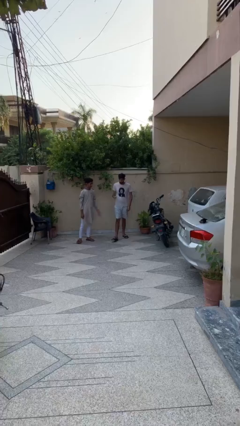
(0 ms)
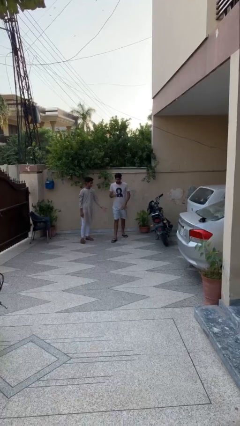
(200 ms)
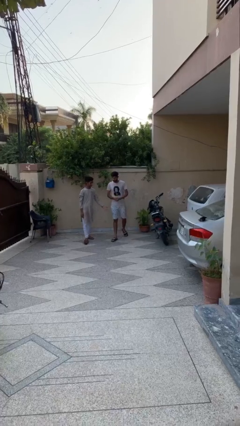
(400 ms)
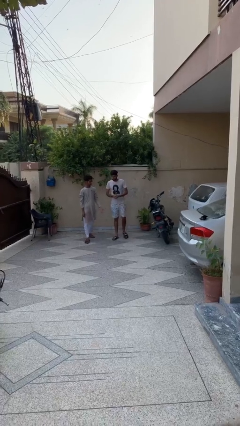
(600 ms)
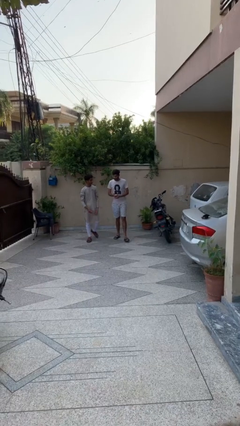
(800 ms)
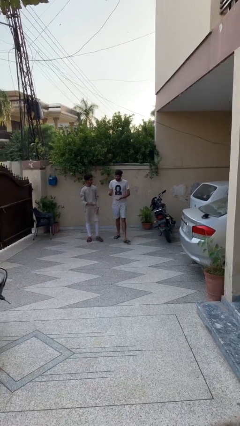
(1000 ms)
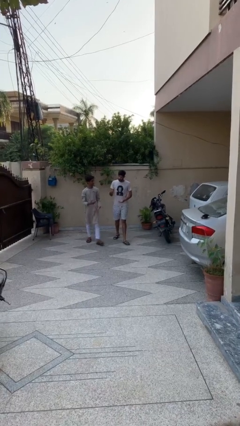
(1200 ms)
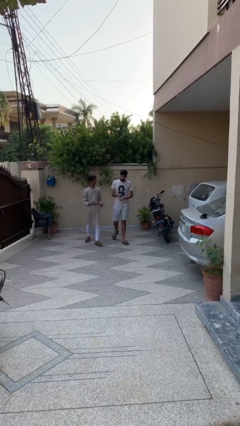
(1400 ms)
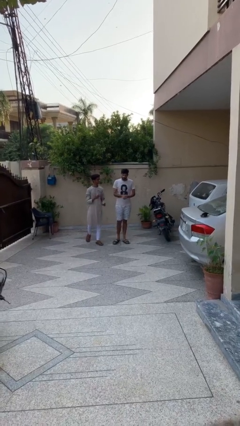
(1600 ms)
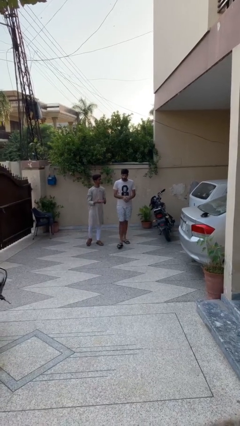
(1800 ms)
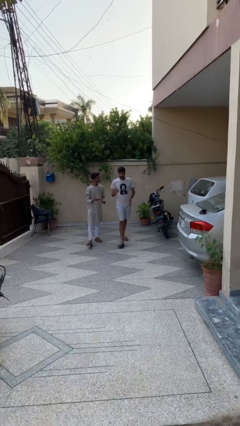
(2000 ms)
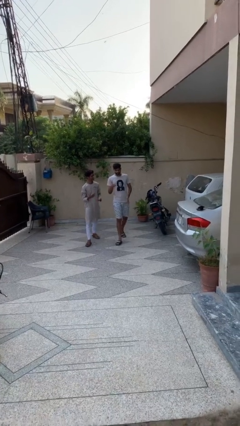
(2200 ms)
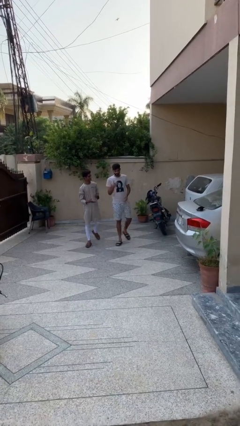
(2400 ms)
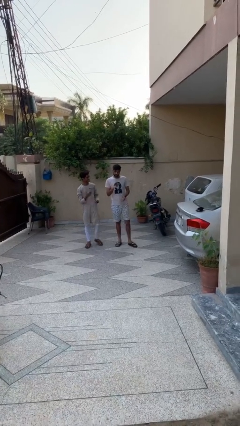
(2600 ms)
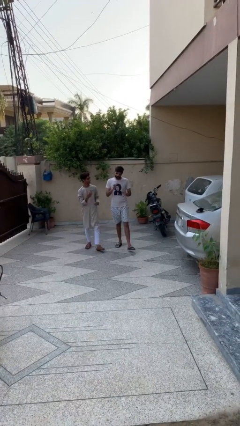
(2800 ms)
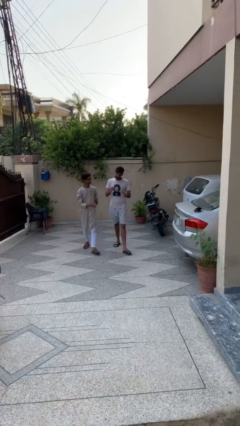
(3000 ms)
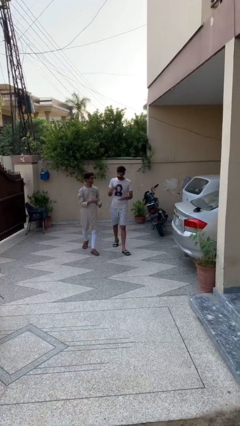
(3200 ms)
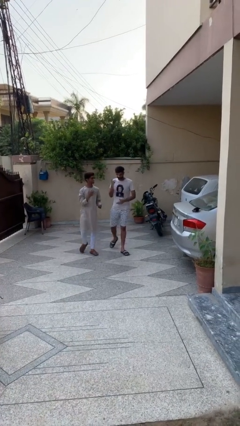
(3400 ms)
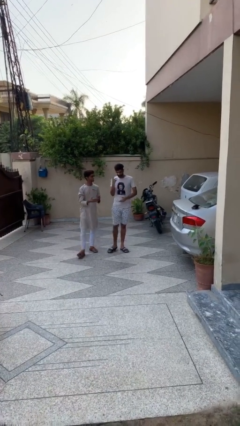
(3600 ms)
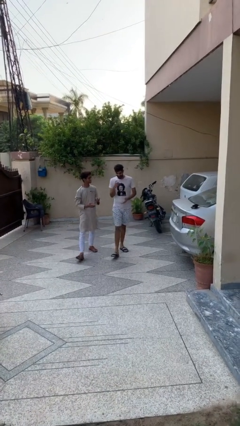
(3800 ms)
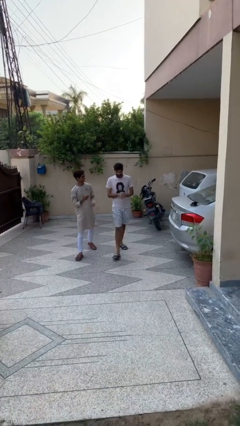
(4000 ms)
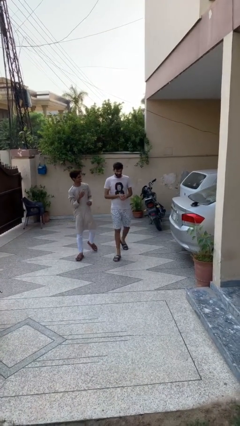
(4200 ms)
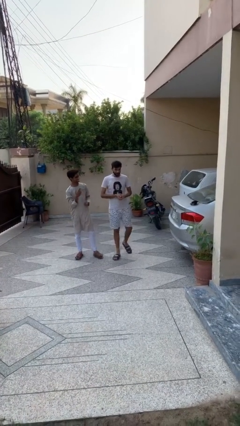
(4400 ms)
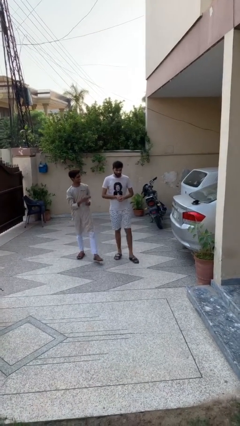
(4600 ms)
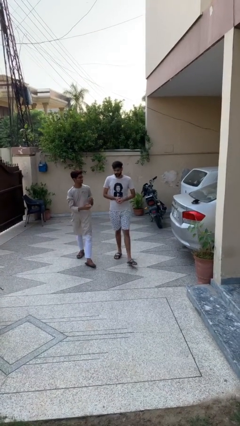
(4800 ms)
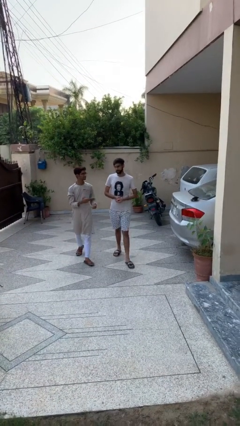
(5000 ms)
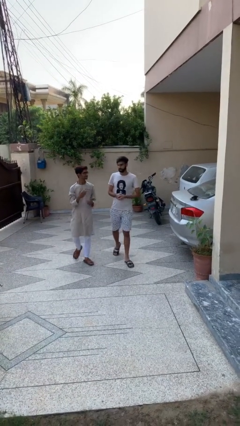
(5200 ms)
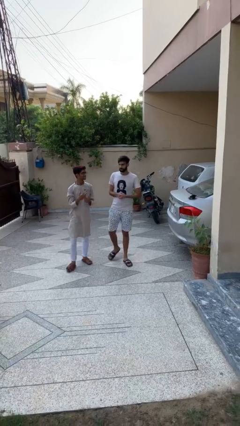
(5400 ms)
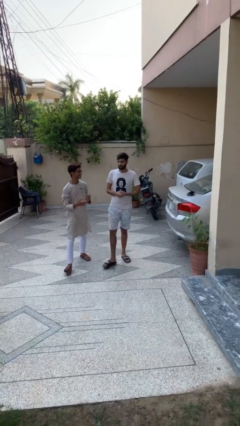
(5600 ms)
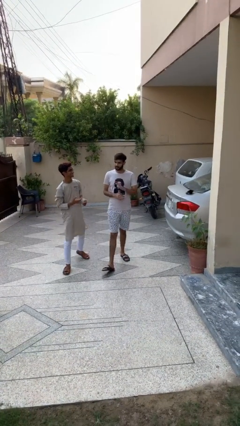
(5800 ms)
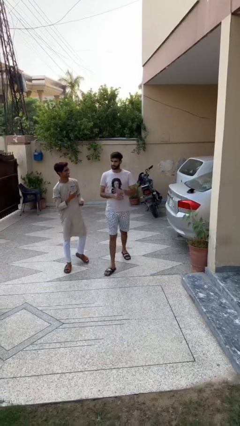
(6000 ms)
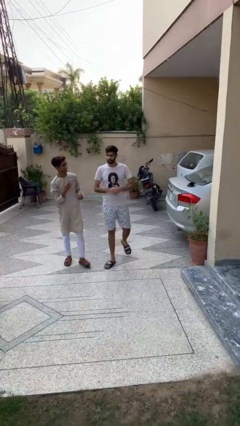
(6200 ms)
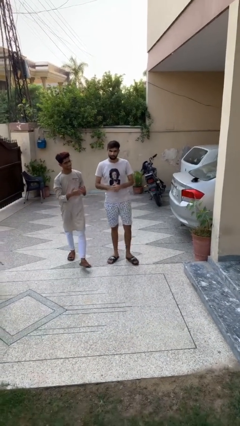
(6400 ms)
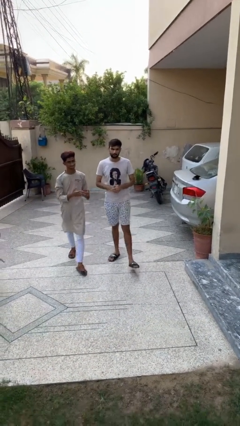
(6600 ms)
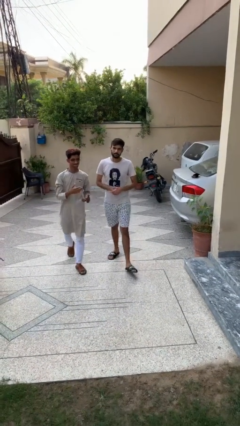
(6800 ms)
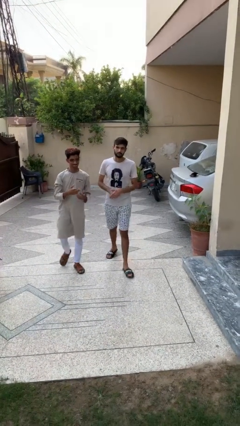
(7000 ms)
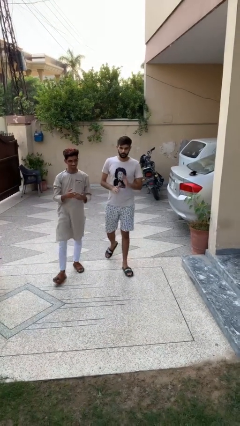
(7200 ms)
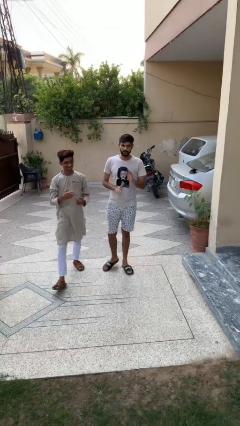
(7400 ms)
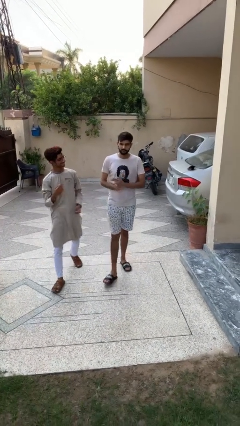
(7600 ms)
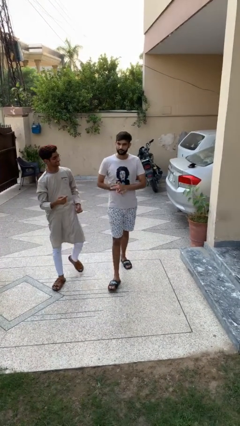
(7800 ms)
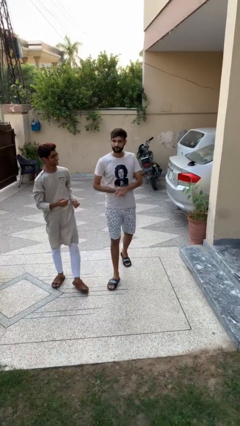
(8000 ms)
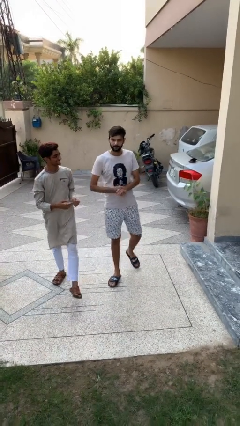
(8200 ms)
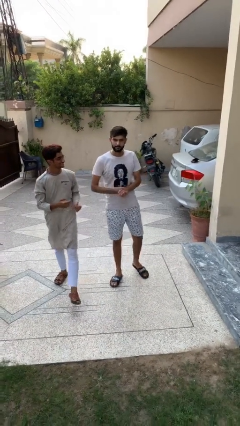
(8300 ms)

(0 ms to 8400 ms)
person talks to person

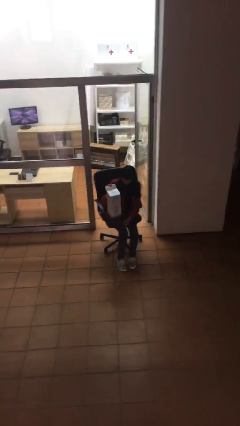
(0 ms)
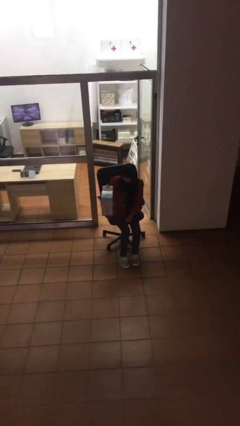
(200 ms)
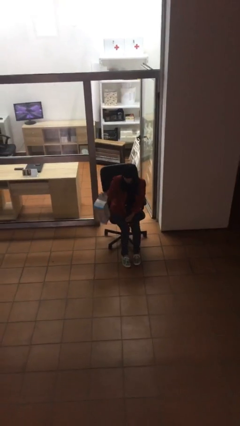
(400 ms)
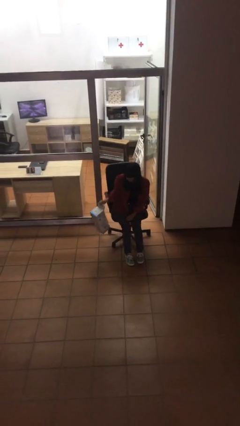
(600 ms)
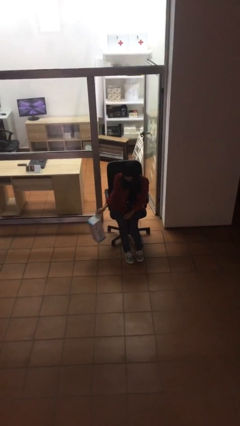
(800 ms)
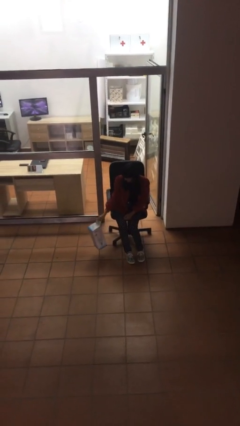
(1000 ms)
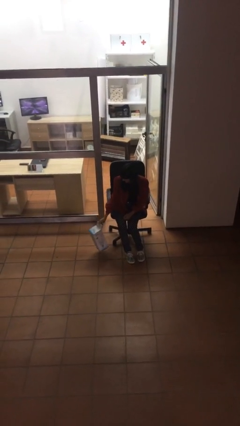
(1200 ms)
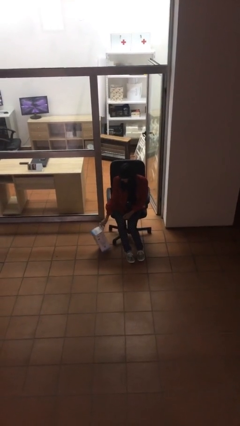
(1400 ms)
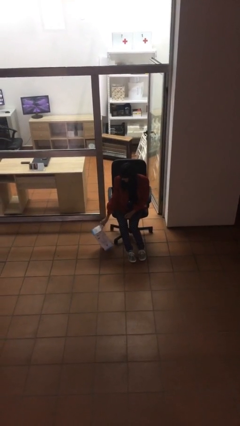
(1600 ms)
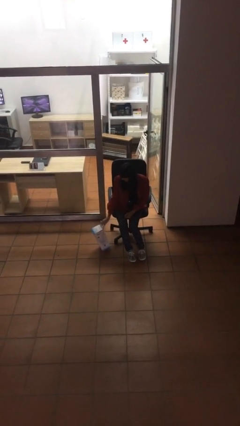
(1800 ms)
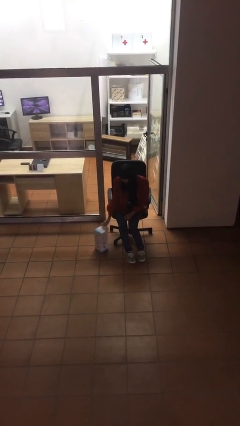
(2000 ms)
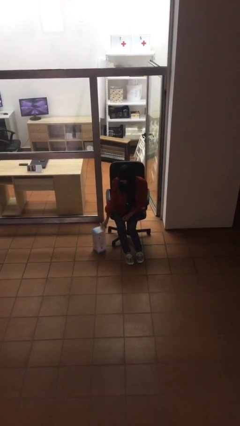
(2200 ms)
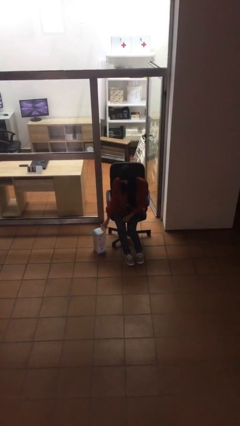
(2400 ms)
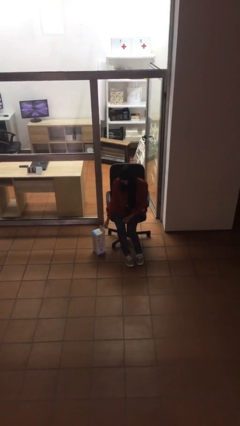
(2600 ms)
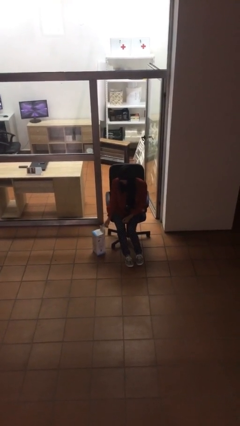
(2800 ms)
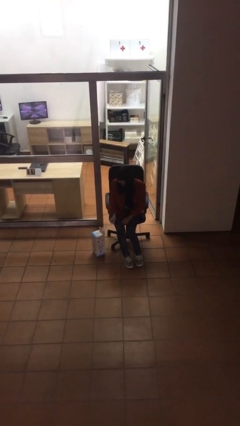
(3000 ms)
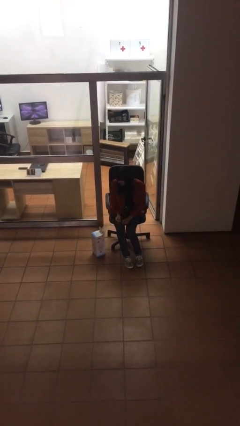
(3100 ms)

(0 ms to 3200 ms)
person puts down object on floor

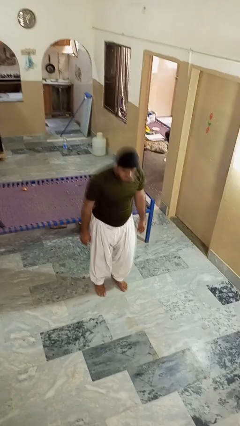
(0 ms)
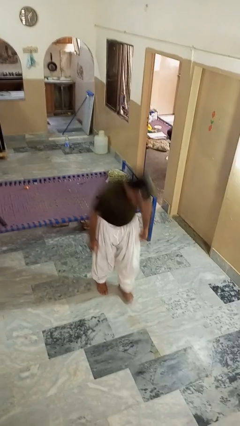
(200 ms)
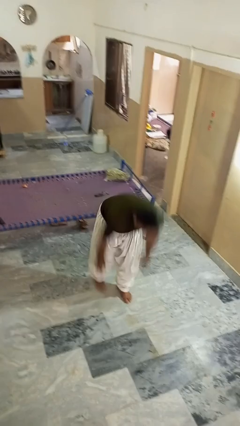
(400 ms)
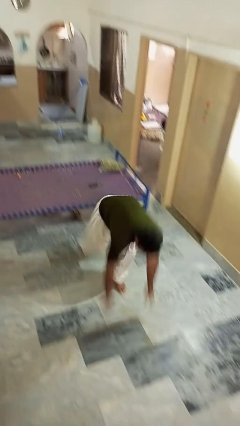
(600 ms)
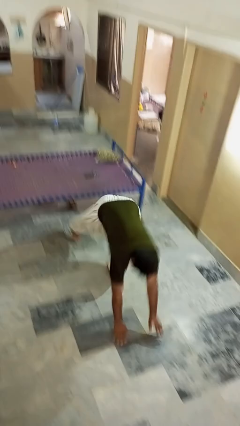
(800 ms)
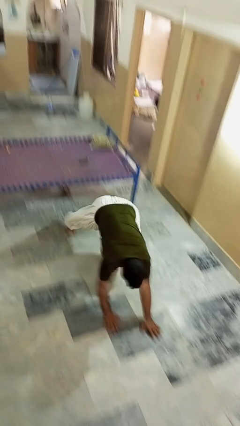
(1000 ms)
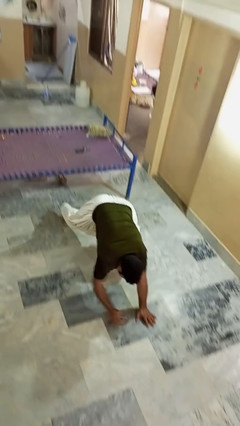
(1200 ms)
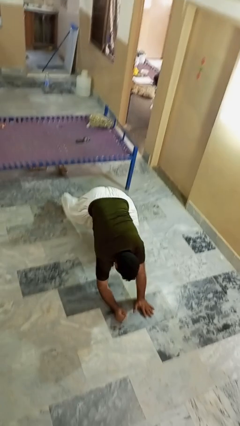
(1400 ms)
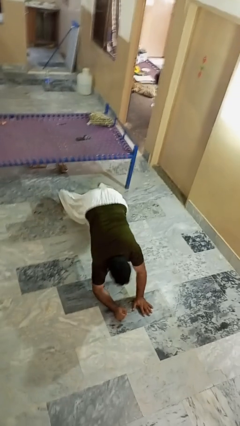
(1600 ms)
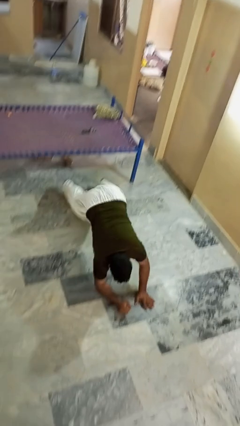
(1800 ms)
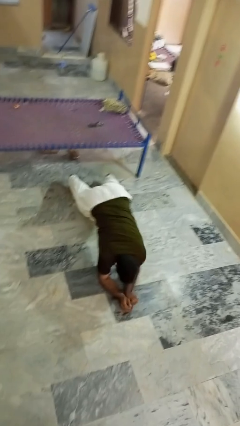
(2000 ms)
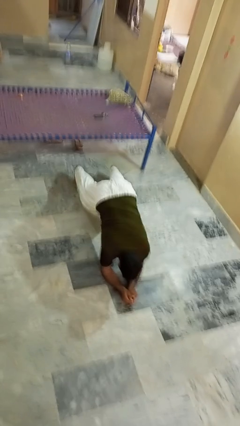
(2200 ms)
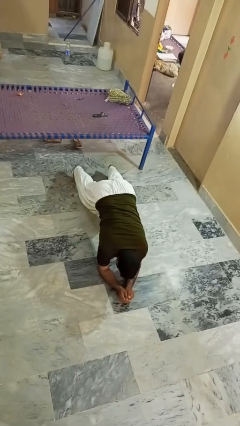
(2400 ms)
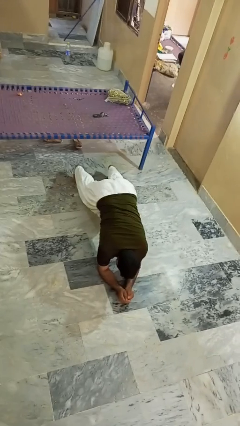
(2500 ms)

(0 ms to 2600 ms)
person exercises with plank

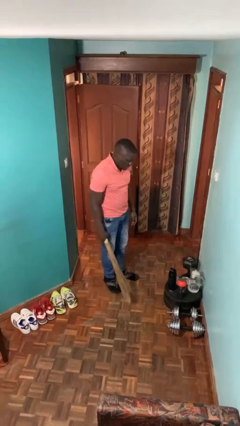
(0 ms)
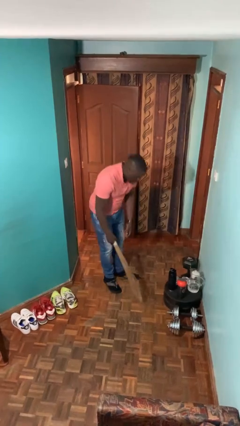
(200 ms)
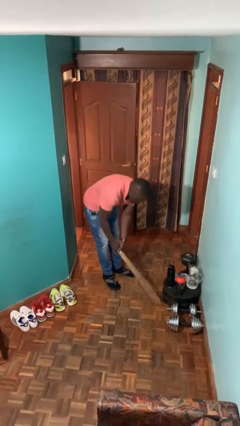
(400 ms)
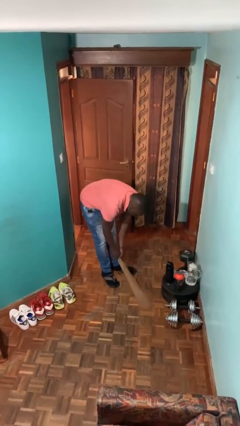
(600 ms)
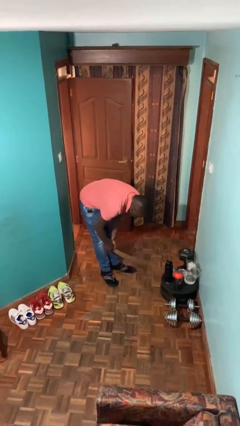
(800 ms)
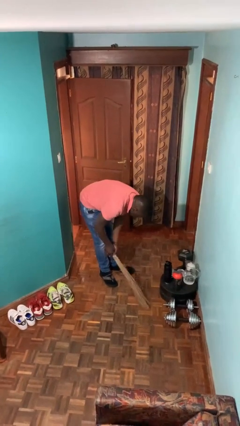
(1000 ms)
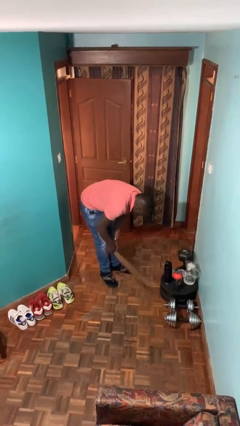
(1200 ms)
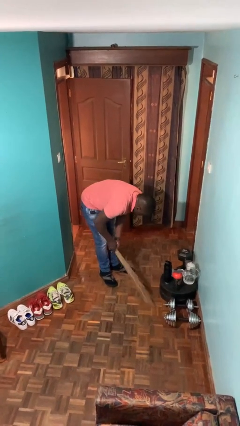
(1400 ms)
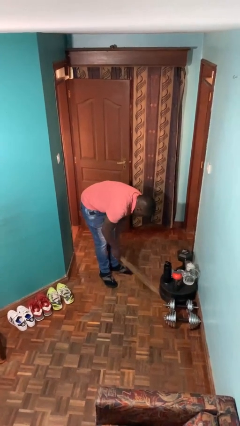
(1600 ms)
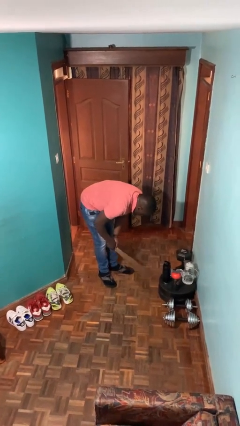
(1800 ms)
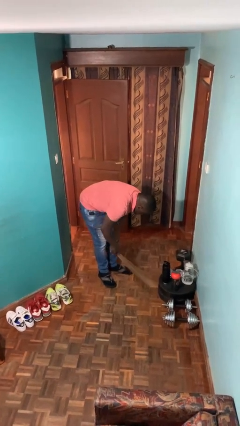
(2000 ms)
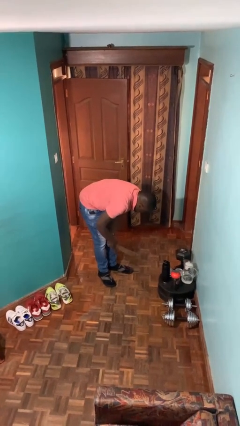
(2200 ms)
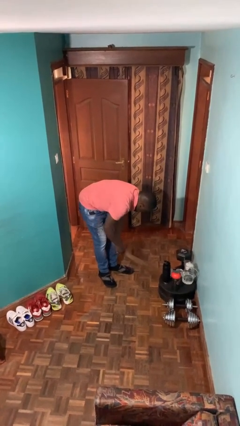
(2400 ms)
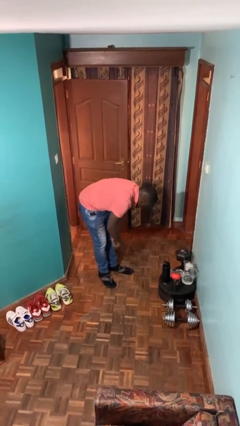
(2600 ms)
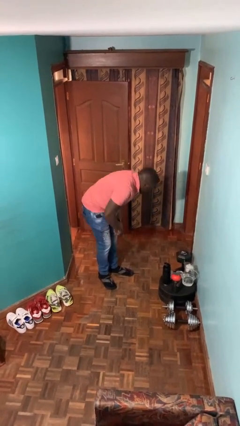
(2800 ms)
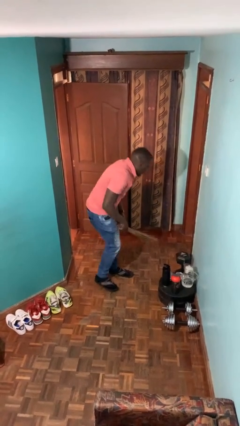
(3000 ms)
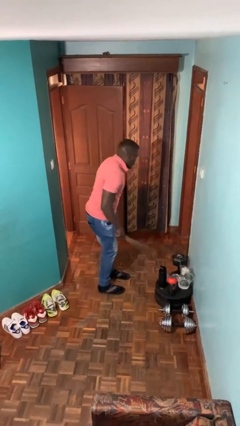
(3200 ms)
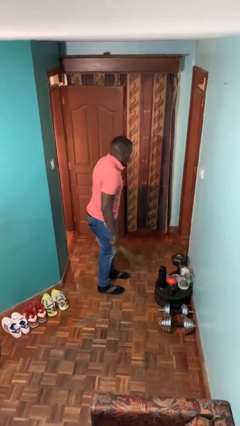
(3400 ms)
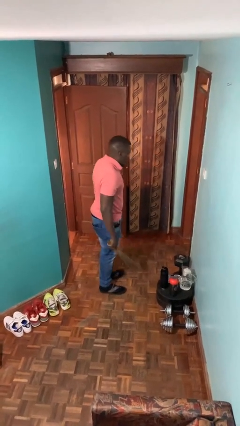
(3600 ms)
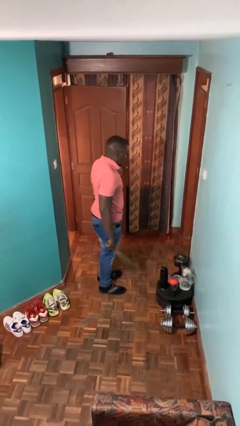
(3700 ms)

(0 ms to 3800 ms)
person sweeps floor
